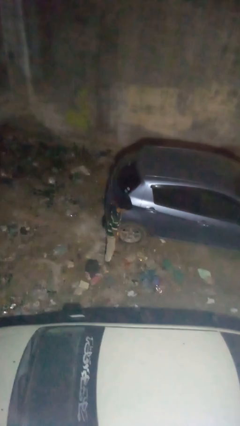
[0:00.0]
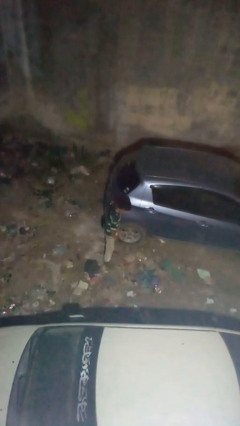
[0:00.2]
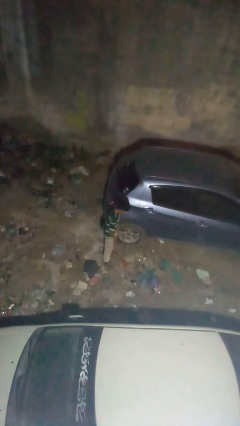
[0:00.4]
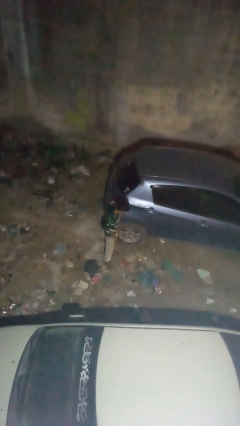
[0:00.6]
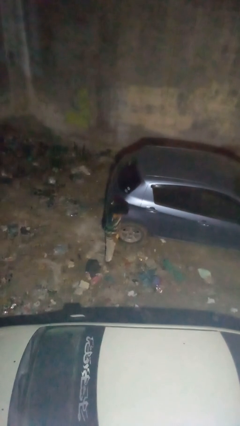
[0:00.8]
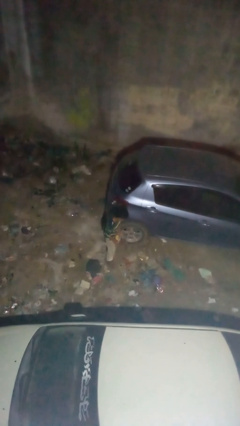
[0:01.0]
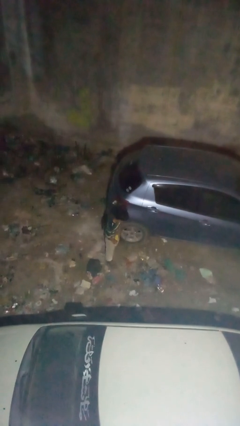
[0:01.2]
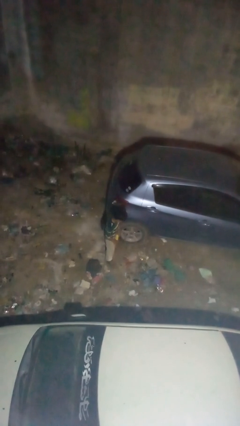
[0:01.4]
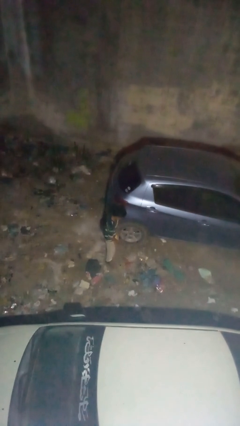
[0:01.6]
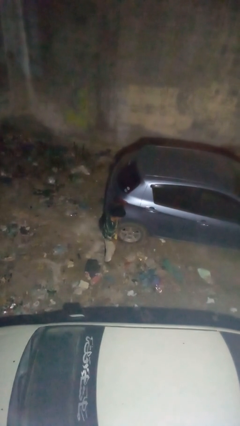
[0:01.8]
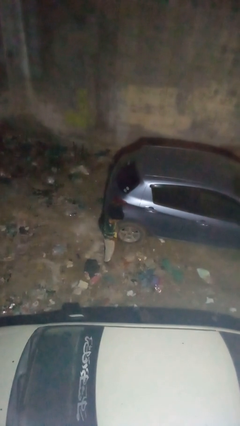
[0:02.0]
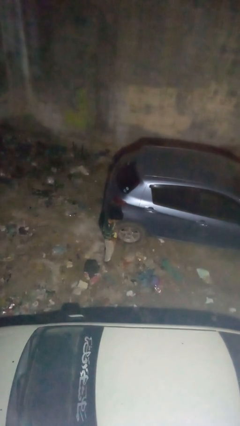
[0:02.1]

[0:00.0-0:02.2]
person kicks car tires

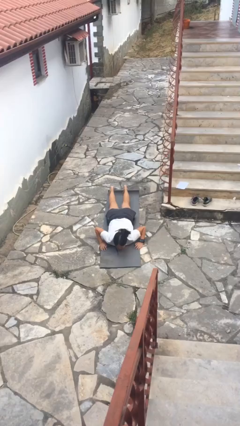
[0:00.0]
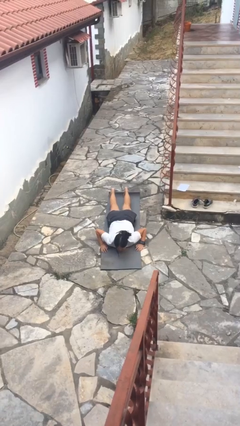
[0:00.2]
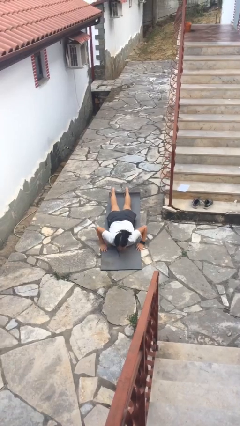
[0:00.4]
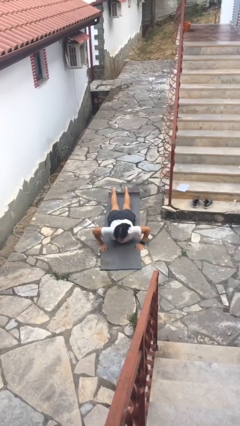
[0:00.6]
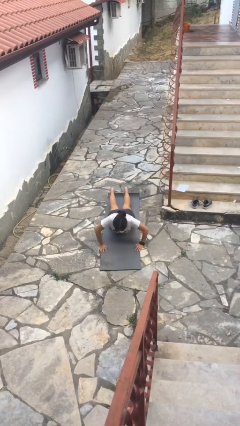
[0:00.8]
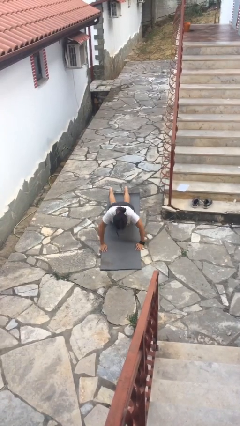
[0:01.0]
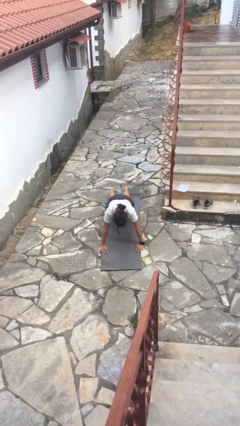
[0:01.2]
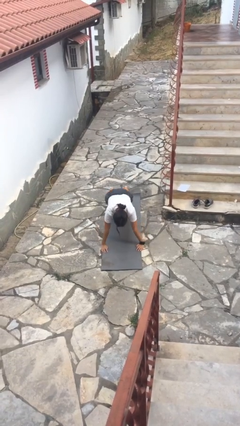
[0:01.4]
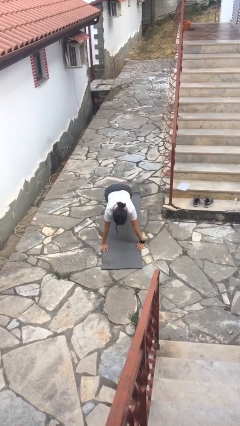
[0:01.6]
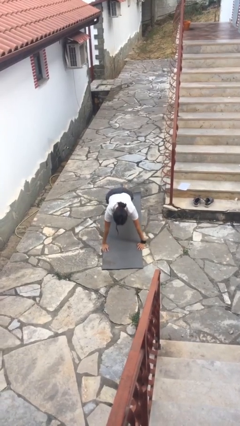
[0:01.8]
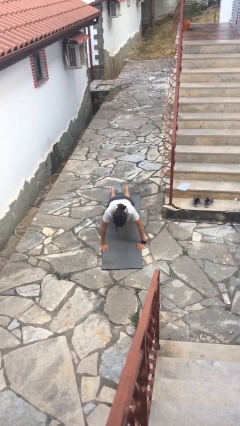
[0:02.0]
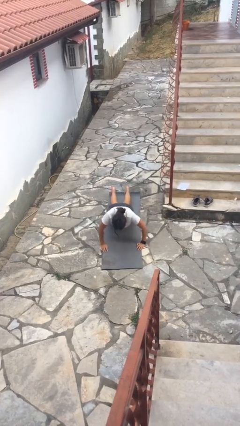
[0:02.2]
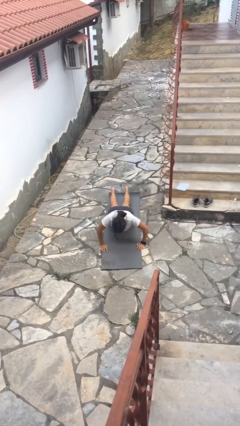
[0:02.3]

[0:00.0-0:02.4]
person exercises with pushup

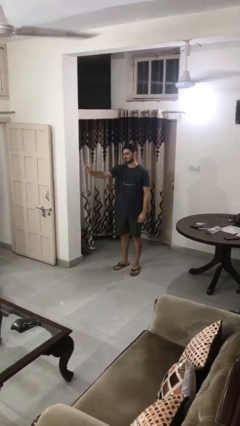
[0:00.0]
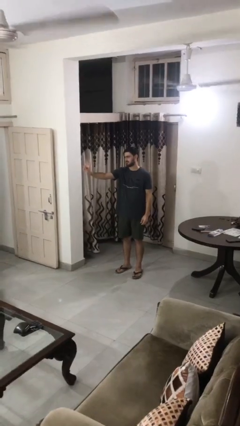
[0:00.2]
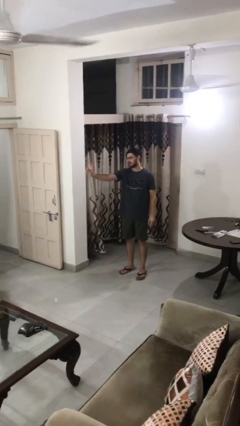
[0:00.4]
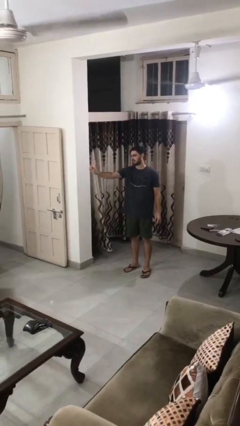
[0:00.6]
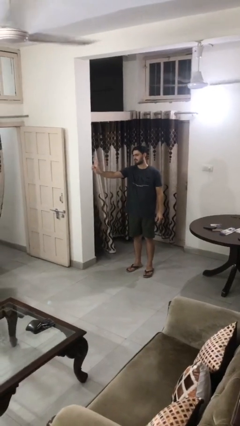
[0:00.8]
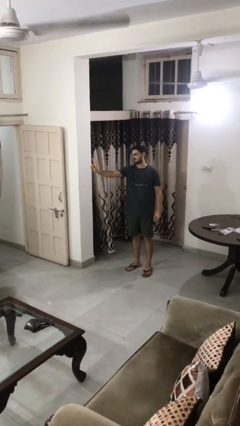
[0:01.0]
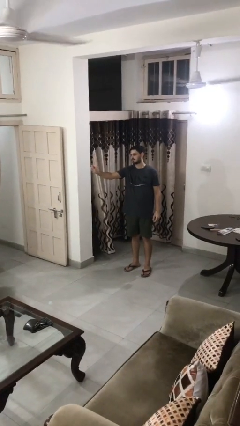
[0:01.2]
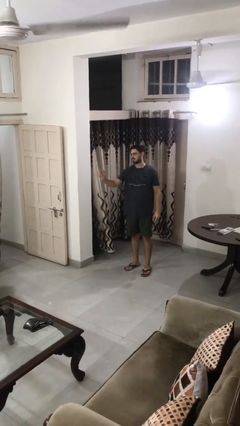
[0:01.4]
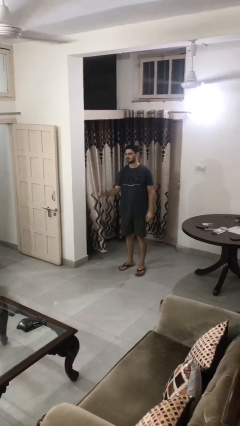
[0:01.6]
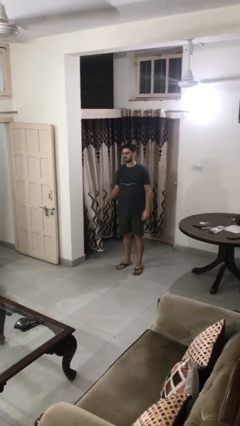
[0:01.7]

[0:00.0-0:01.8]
person gestures peace

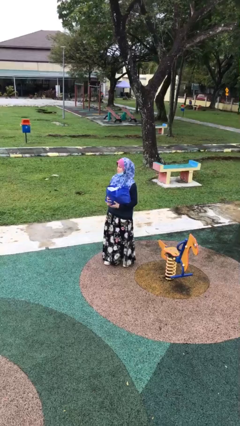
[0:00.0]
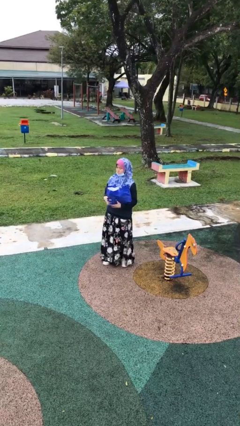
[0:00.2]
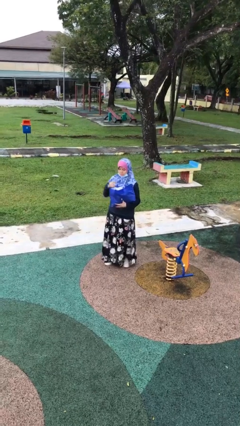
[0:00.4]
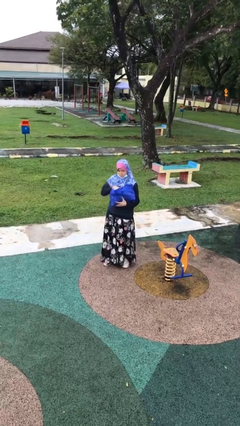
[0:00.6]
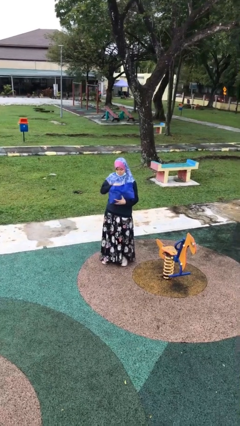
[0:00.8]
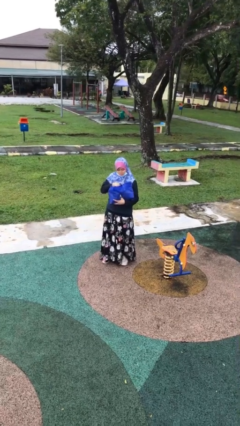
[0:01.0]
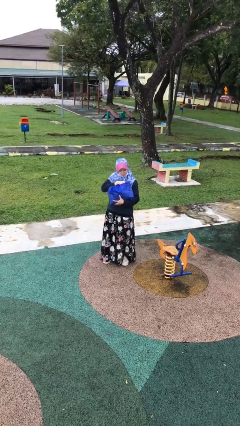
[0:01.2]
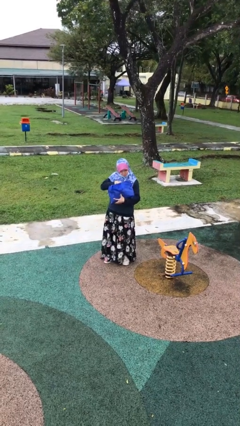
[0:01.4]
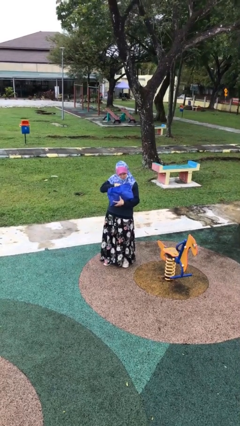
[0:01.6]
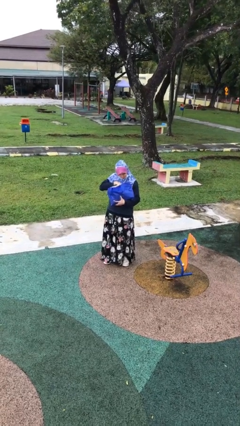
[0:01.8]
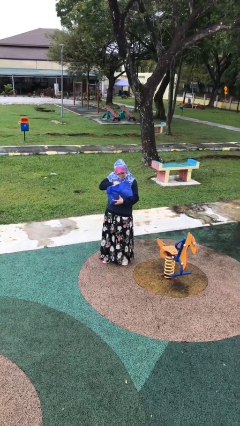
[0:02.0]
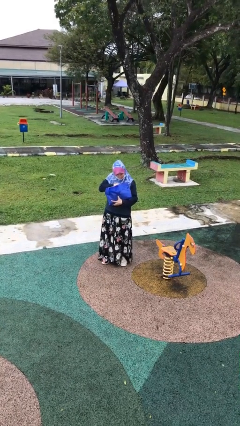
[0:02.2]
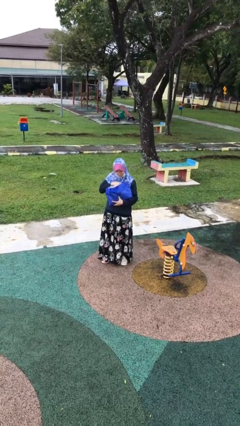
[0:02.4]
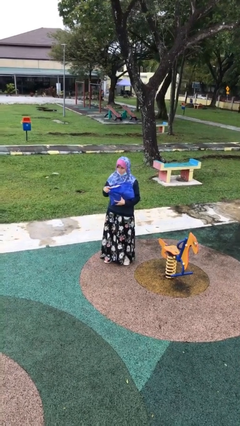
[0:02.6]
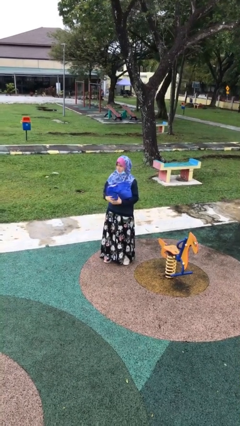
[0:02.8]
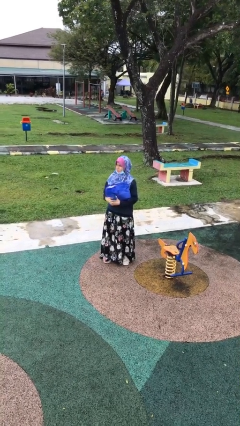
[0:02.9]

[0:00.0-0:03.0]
person searches in bag

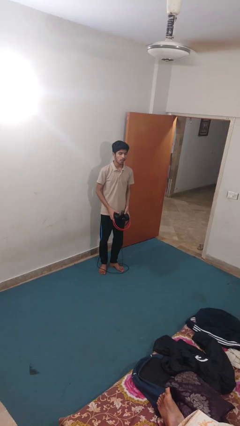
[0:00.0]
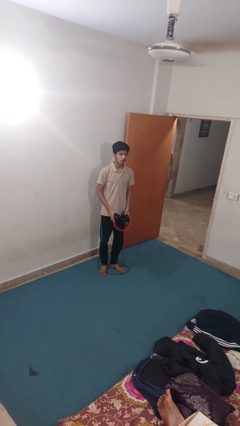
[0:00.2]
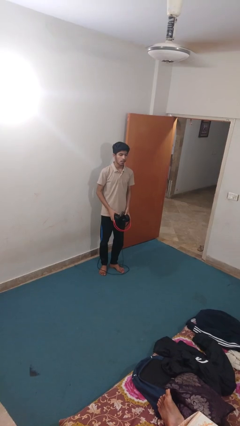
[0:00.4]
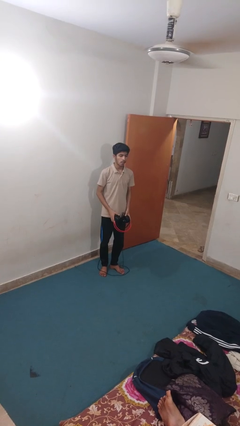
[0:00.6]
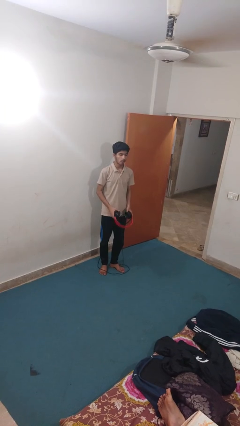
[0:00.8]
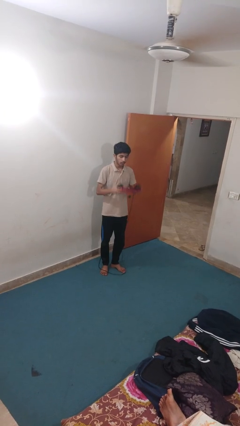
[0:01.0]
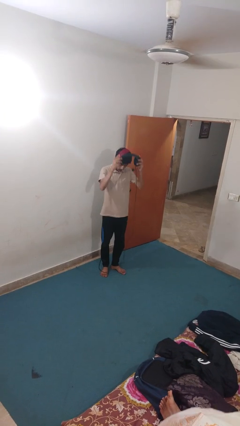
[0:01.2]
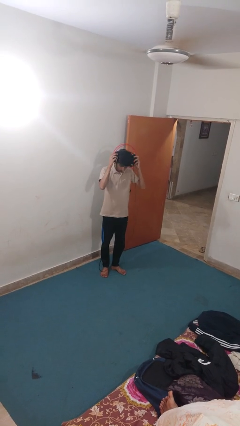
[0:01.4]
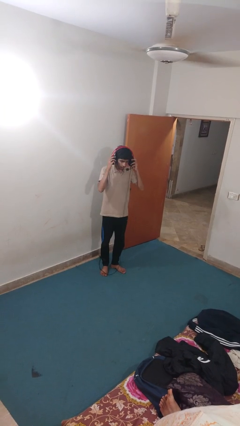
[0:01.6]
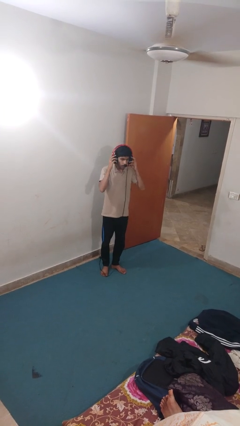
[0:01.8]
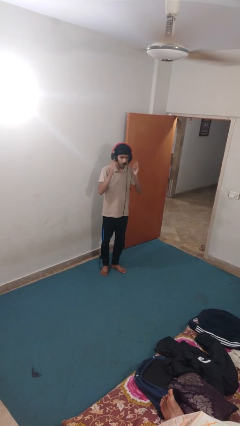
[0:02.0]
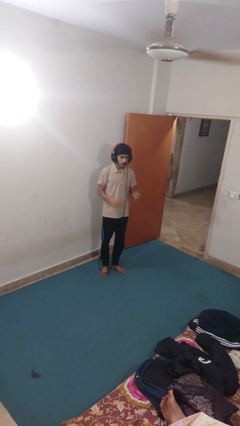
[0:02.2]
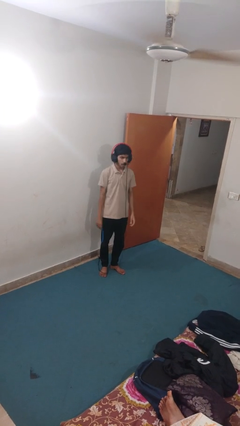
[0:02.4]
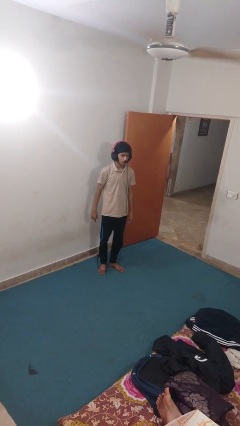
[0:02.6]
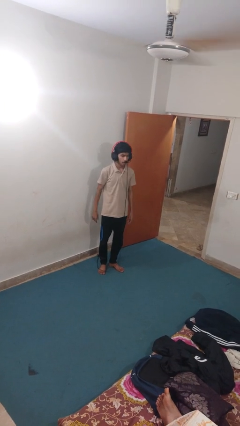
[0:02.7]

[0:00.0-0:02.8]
person puts on headphones

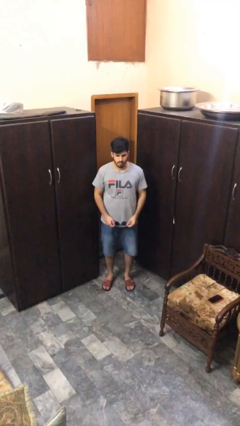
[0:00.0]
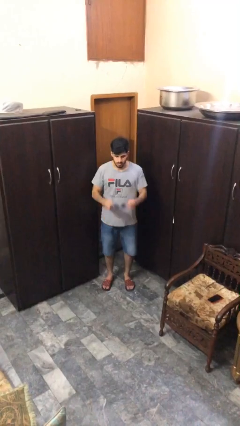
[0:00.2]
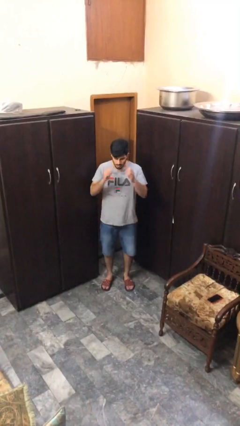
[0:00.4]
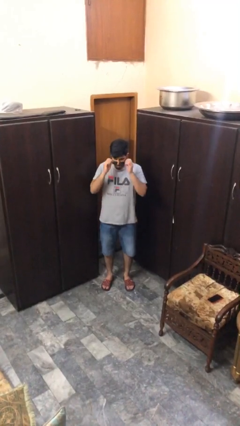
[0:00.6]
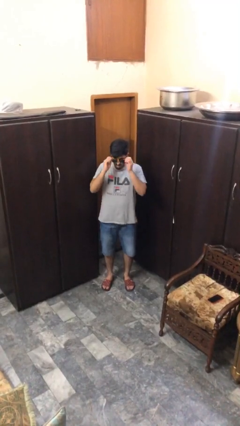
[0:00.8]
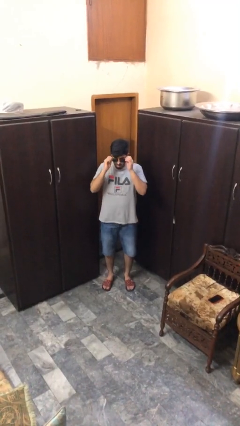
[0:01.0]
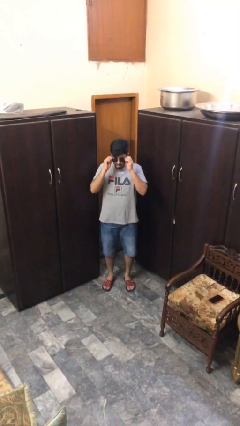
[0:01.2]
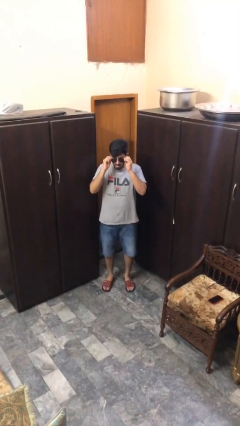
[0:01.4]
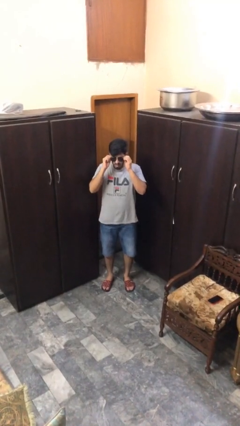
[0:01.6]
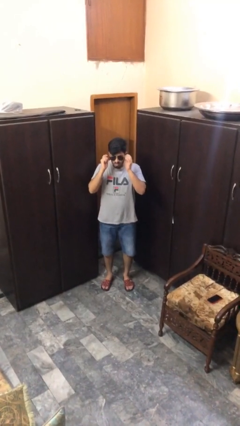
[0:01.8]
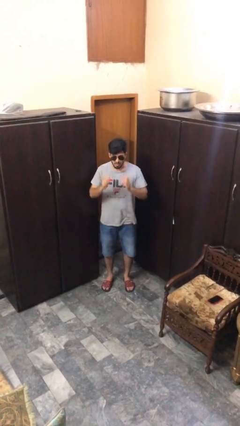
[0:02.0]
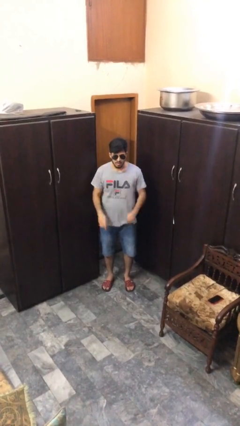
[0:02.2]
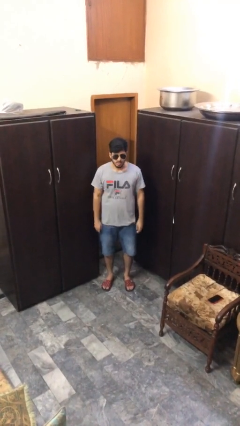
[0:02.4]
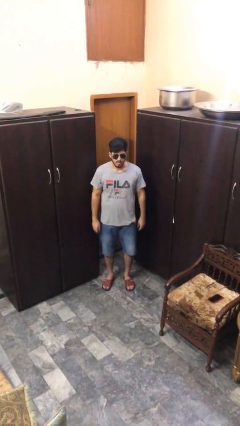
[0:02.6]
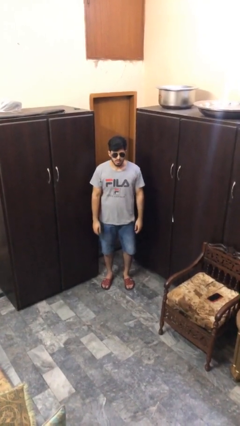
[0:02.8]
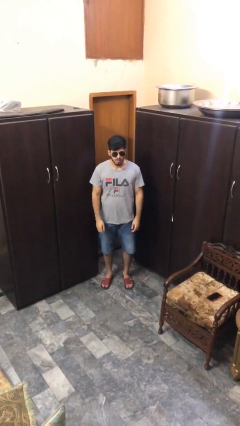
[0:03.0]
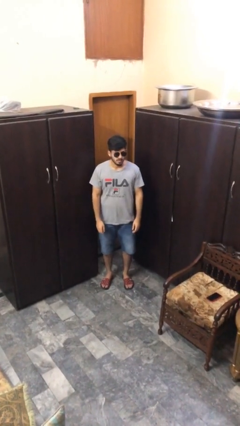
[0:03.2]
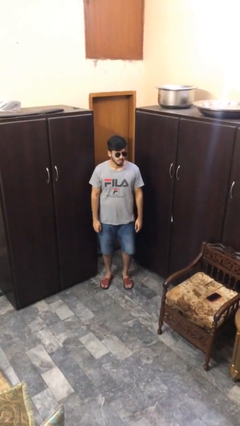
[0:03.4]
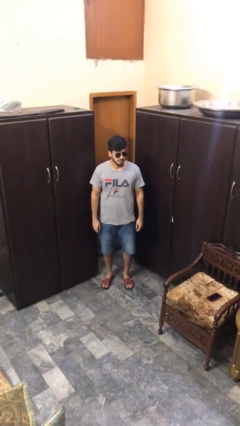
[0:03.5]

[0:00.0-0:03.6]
person puts on sunglasses

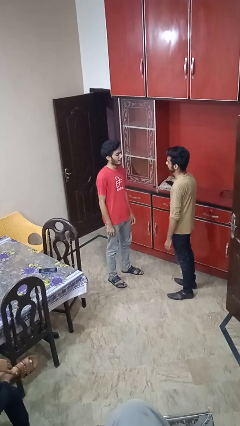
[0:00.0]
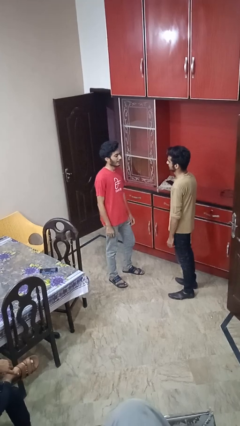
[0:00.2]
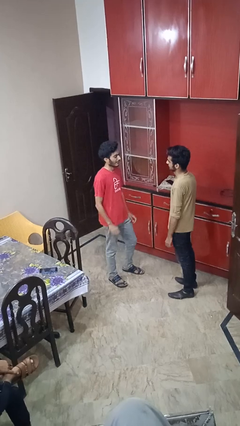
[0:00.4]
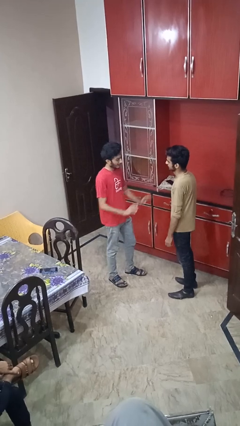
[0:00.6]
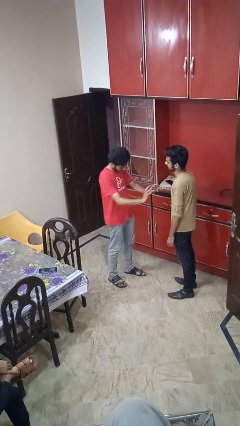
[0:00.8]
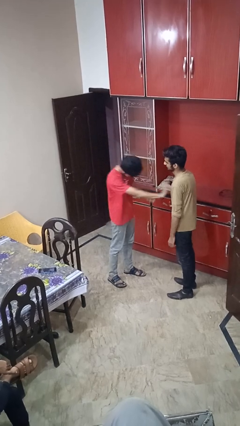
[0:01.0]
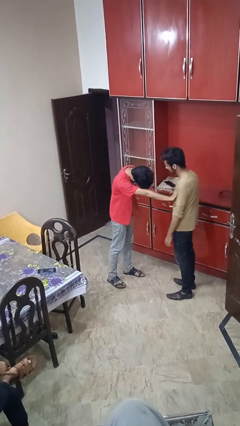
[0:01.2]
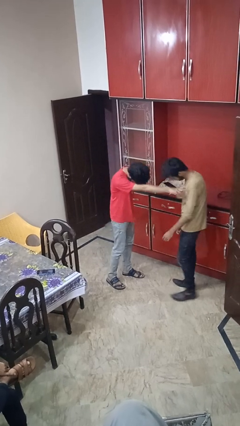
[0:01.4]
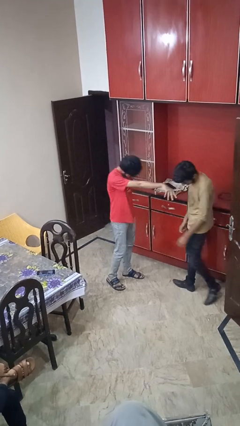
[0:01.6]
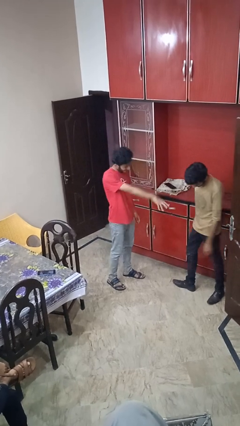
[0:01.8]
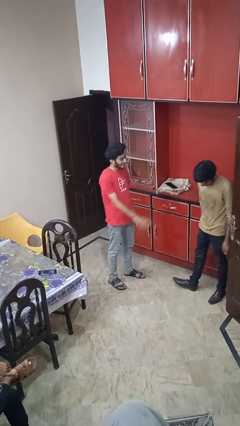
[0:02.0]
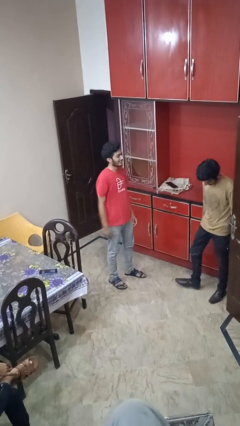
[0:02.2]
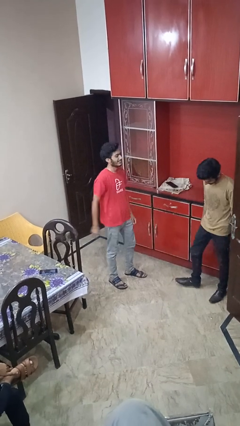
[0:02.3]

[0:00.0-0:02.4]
person shoves person
